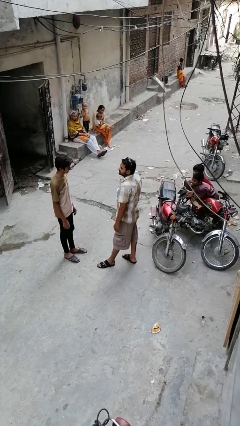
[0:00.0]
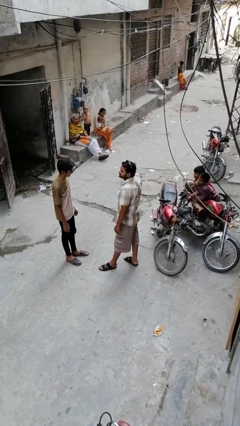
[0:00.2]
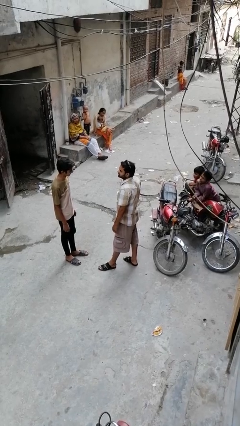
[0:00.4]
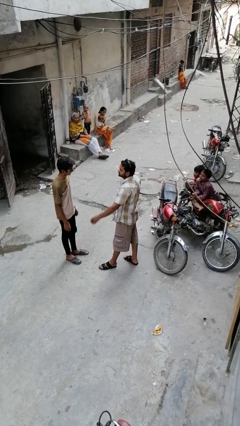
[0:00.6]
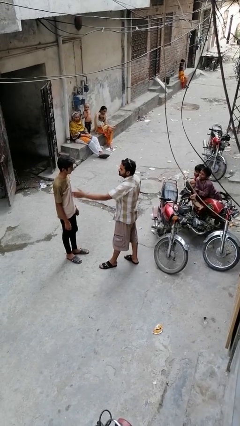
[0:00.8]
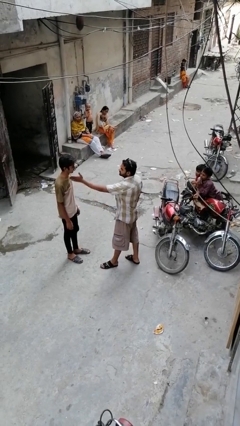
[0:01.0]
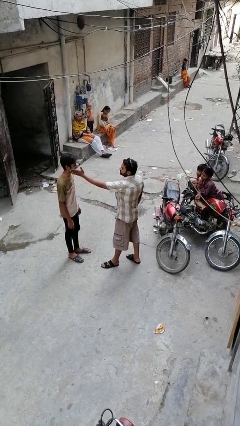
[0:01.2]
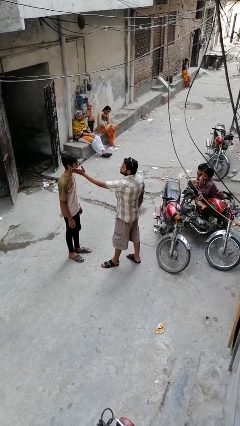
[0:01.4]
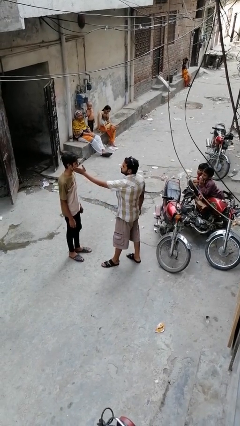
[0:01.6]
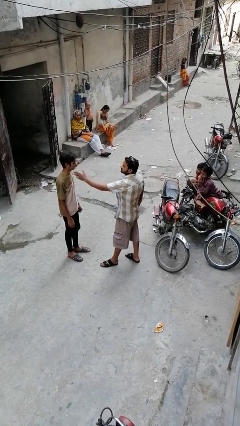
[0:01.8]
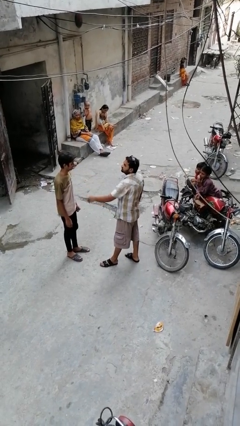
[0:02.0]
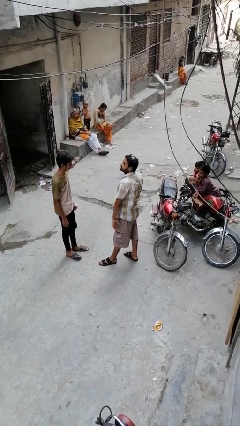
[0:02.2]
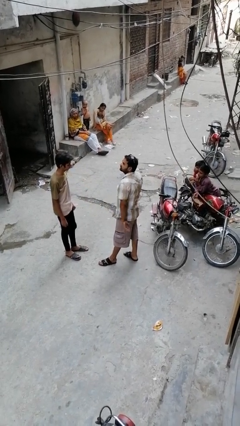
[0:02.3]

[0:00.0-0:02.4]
person touches face of person

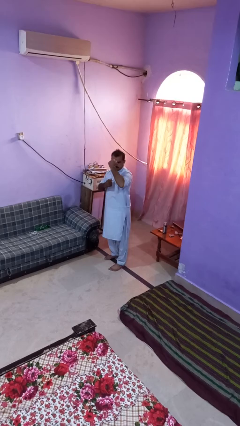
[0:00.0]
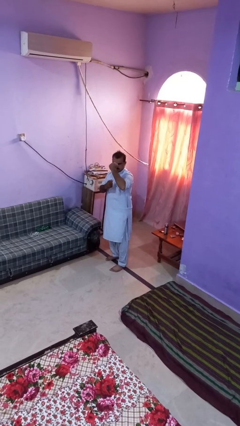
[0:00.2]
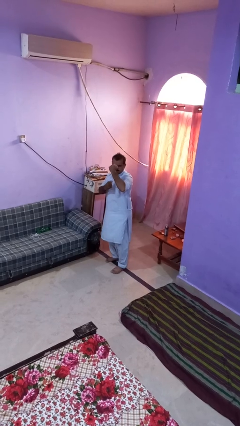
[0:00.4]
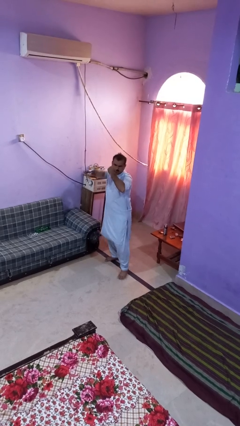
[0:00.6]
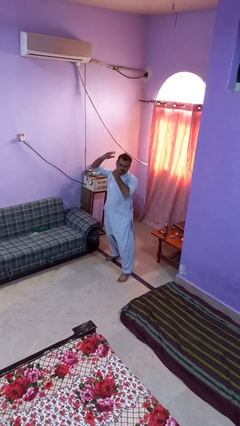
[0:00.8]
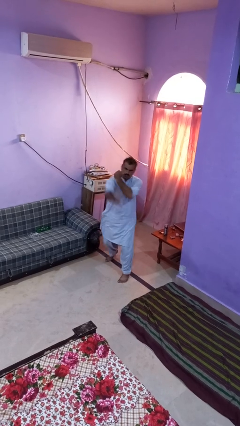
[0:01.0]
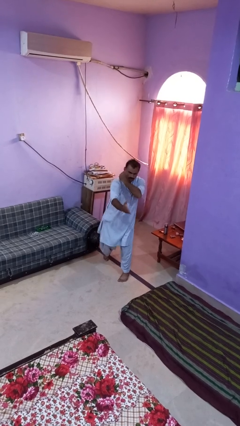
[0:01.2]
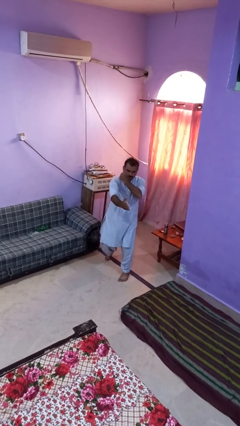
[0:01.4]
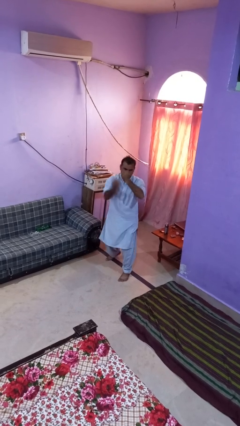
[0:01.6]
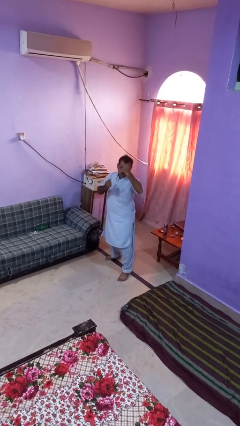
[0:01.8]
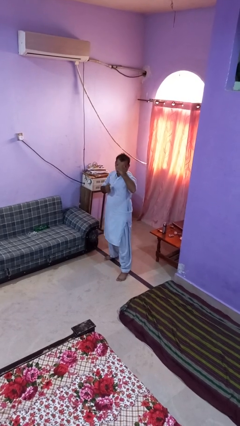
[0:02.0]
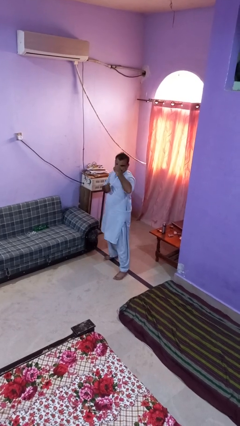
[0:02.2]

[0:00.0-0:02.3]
person karate chop

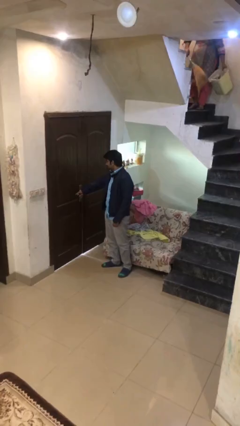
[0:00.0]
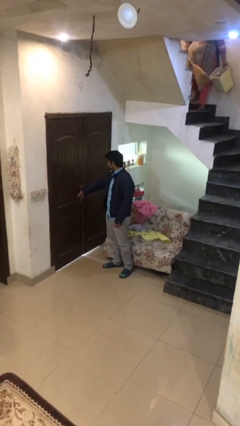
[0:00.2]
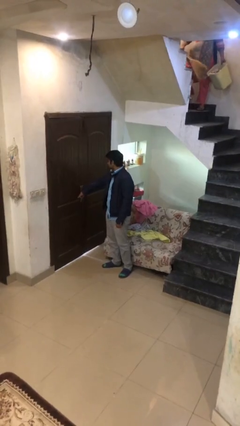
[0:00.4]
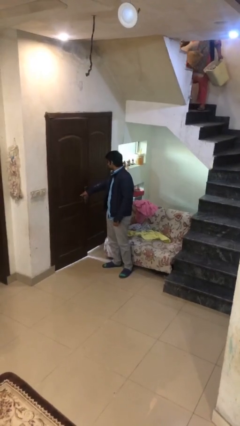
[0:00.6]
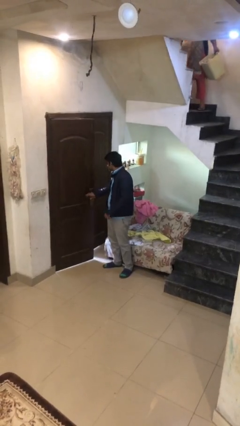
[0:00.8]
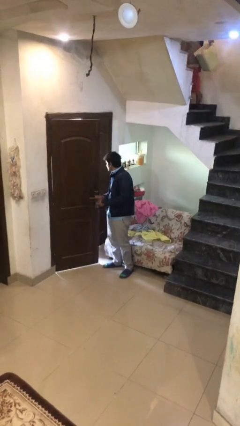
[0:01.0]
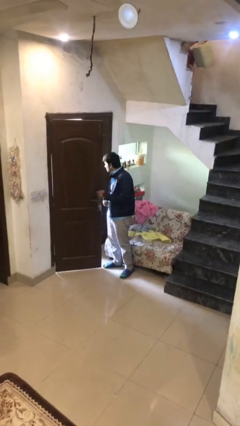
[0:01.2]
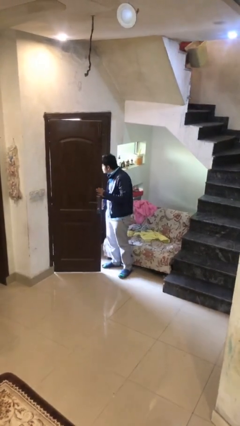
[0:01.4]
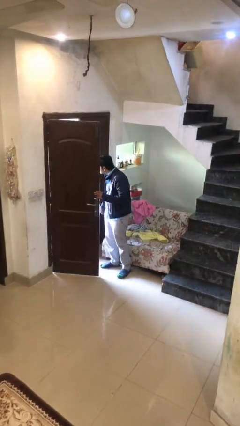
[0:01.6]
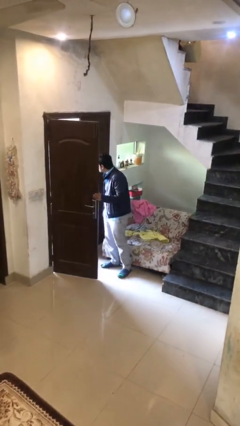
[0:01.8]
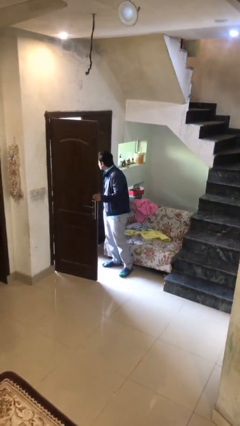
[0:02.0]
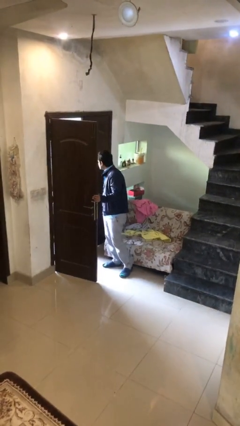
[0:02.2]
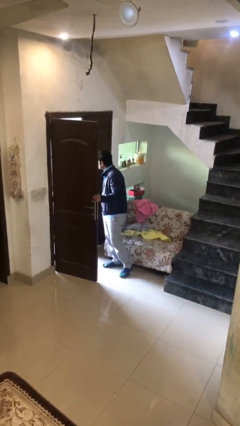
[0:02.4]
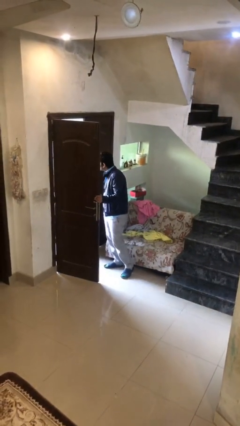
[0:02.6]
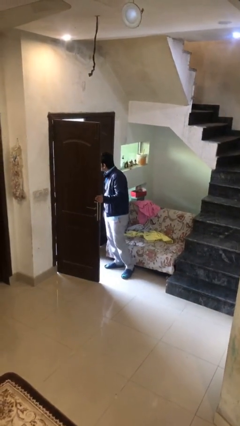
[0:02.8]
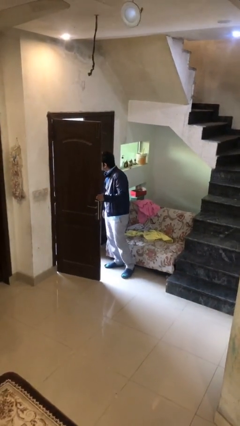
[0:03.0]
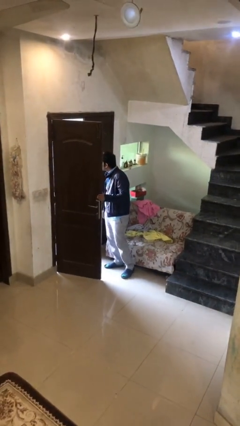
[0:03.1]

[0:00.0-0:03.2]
person opens facility door

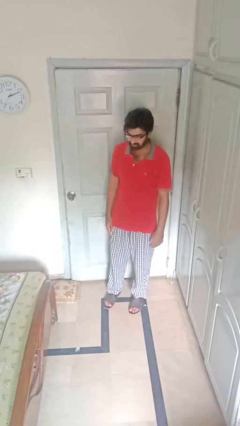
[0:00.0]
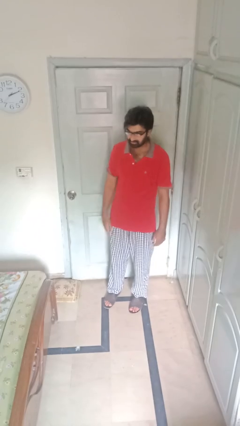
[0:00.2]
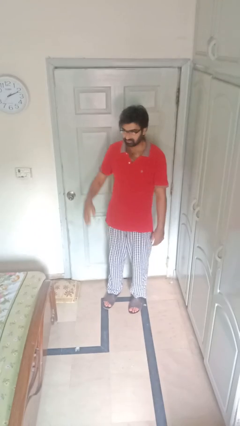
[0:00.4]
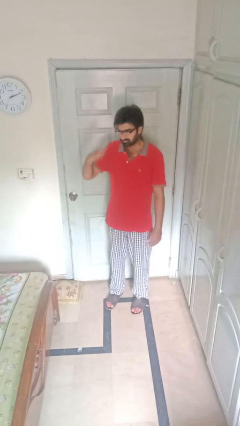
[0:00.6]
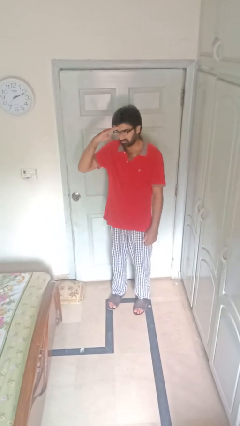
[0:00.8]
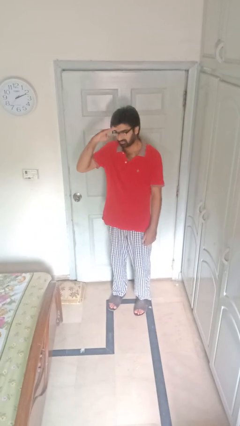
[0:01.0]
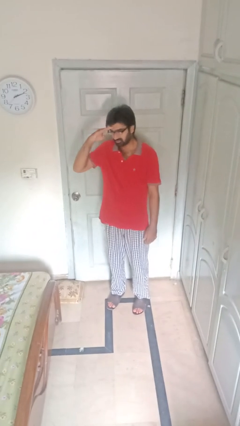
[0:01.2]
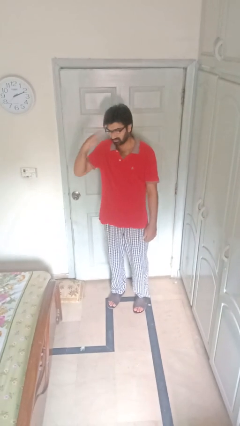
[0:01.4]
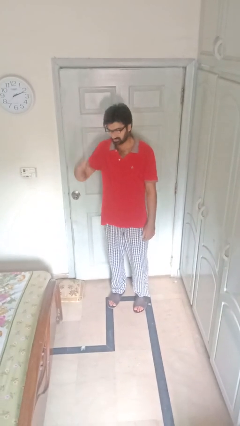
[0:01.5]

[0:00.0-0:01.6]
person salutes

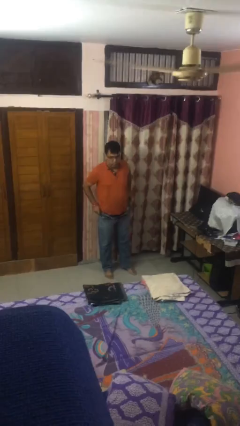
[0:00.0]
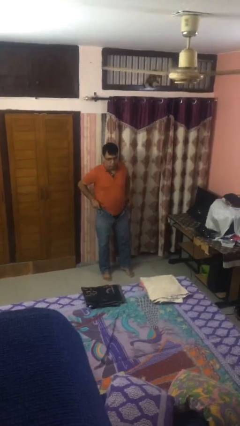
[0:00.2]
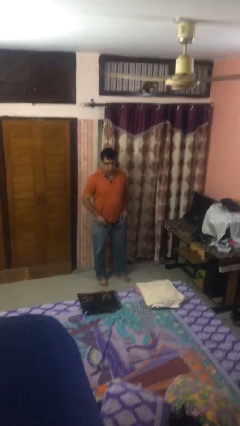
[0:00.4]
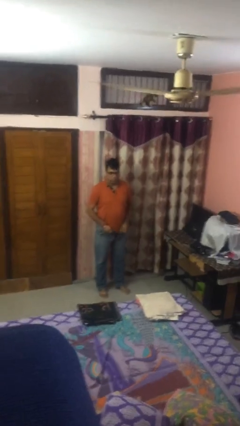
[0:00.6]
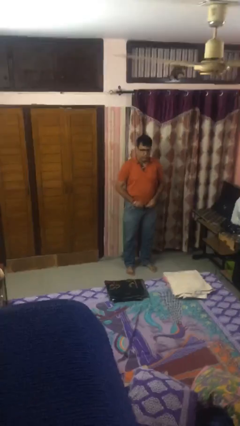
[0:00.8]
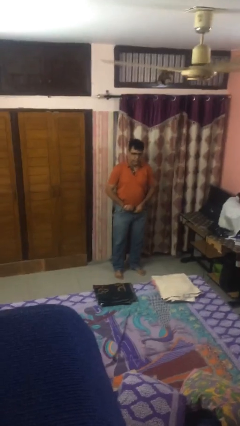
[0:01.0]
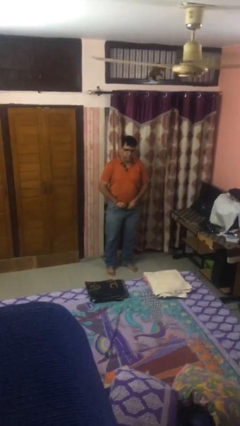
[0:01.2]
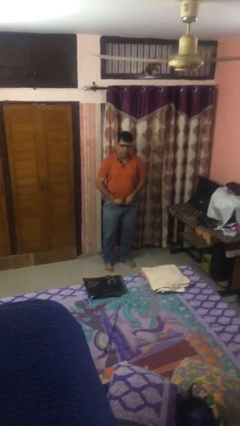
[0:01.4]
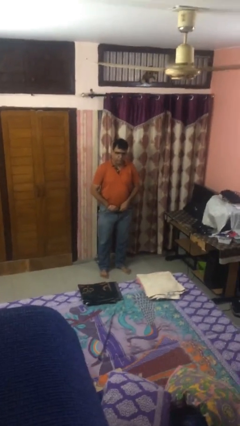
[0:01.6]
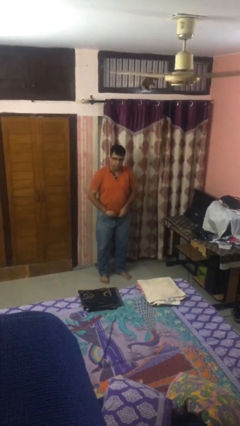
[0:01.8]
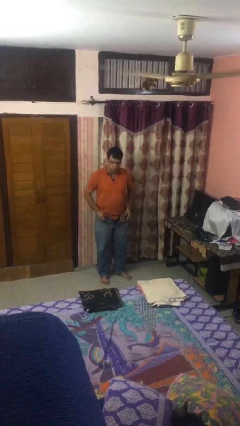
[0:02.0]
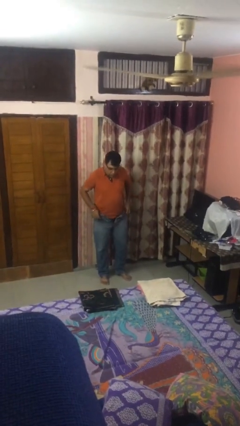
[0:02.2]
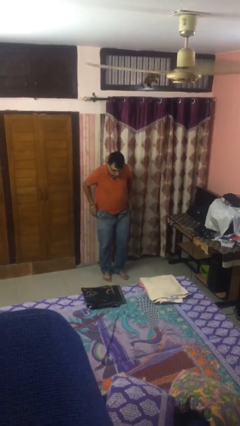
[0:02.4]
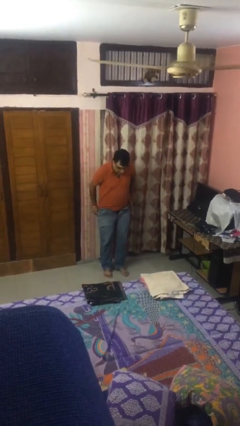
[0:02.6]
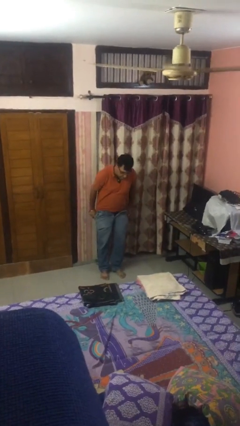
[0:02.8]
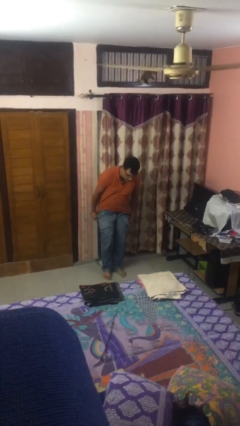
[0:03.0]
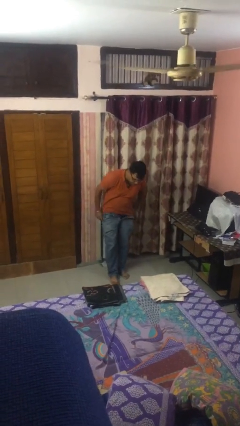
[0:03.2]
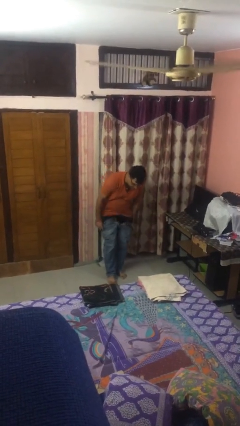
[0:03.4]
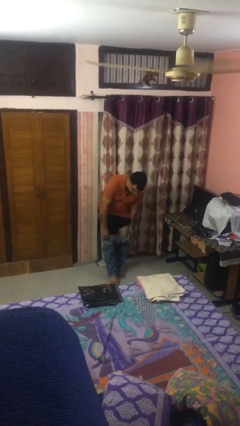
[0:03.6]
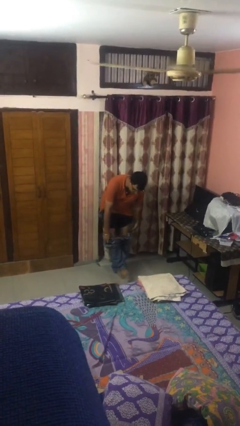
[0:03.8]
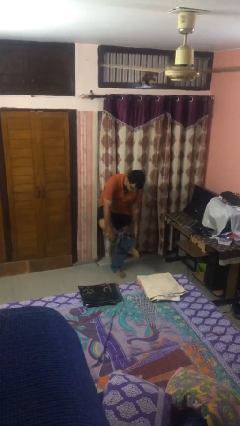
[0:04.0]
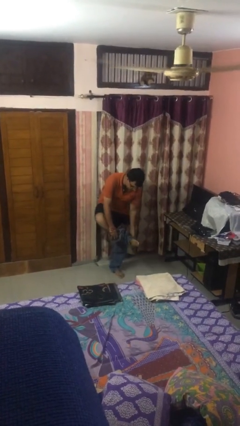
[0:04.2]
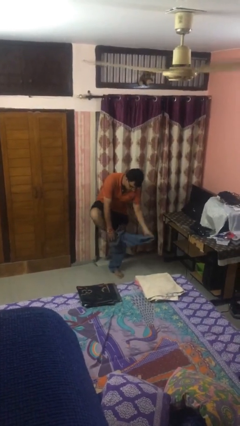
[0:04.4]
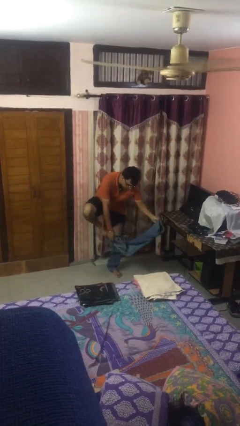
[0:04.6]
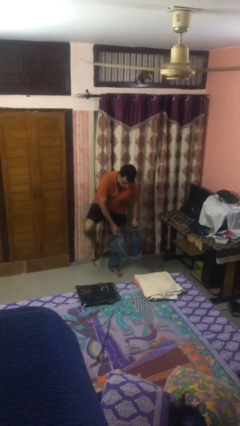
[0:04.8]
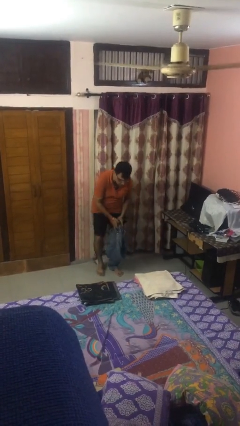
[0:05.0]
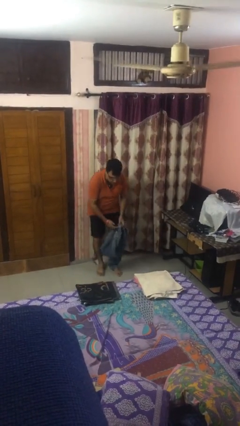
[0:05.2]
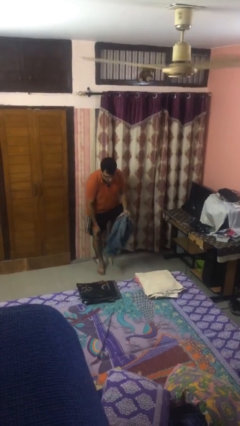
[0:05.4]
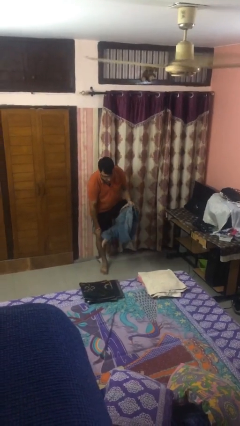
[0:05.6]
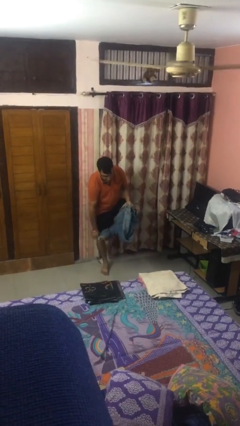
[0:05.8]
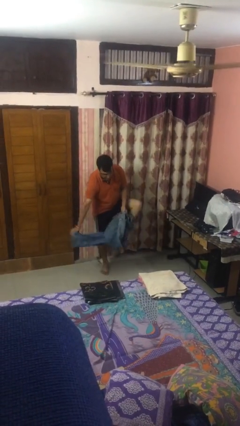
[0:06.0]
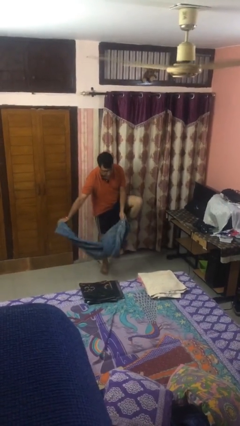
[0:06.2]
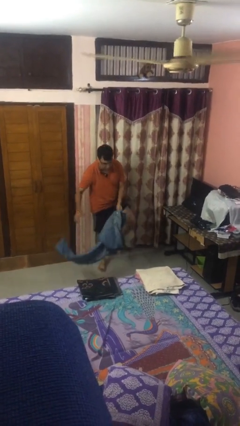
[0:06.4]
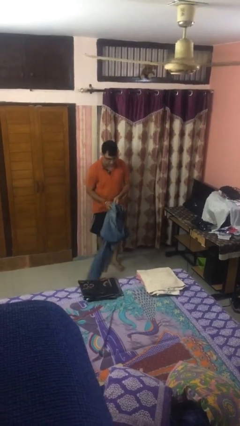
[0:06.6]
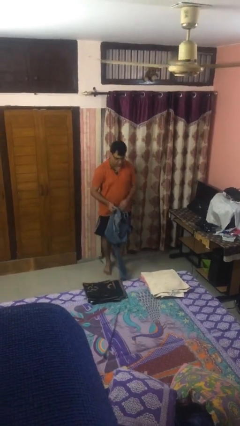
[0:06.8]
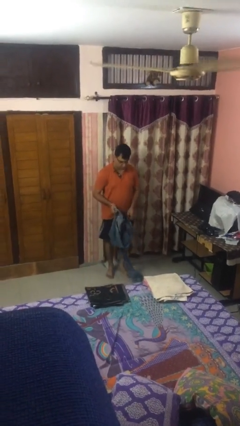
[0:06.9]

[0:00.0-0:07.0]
person takes off pants

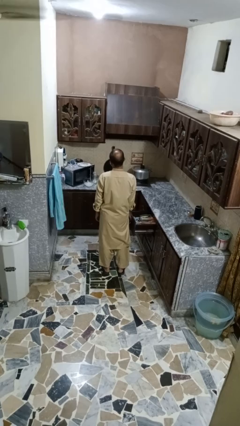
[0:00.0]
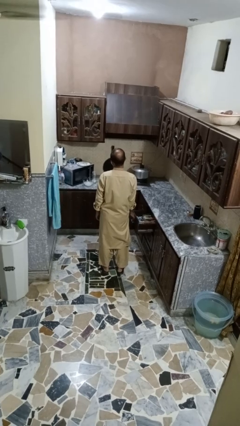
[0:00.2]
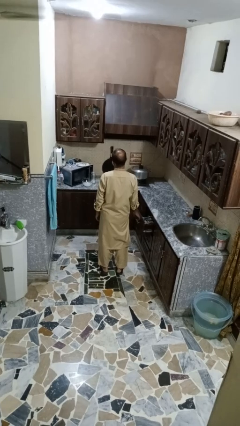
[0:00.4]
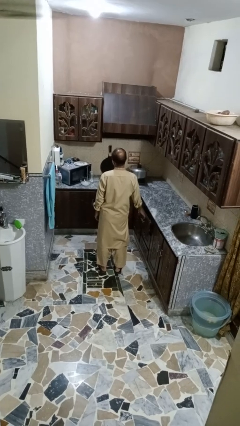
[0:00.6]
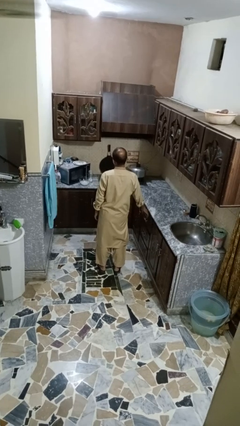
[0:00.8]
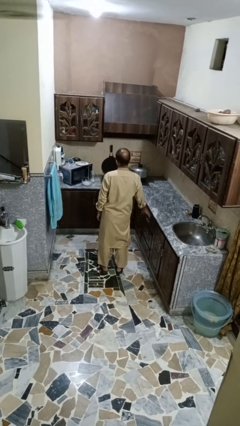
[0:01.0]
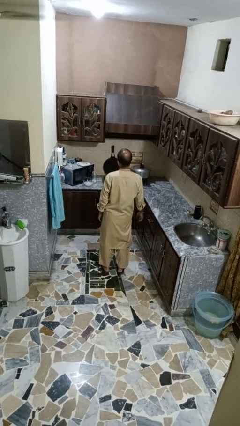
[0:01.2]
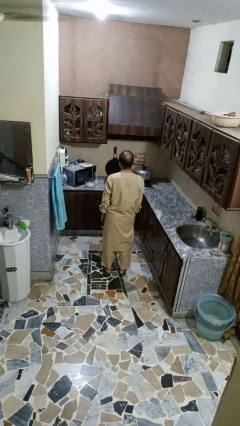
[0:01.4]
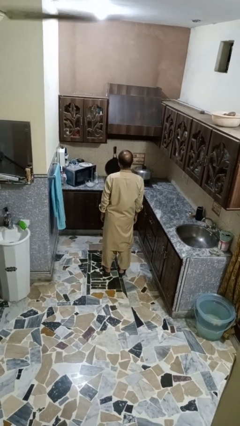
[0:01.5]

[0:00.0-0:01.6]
person closes kitchen drawer
